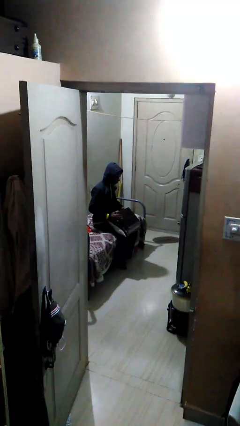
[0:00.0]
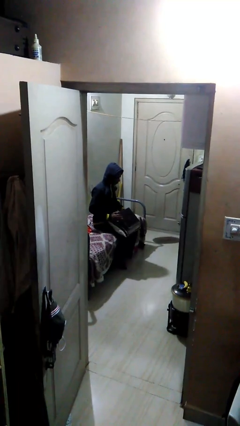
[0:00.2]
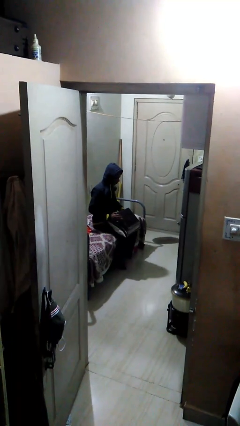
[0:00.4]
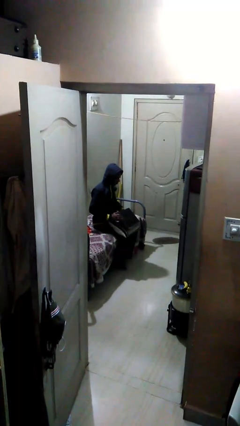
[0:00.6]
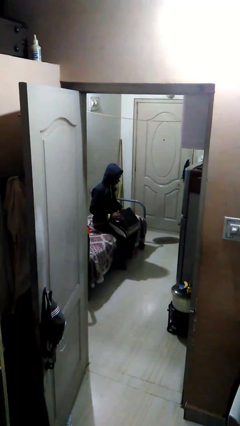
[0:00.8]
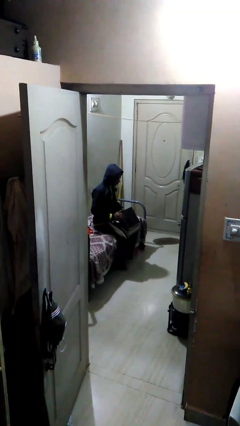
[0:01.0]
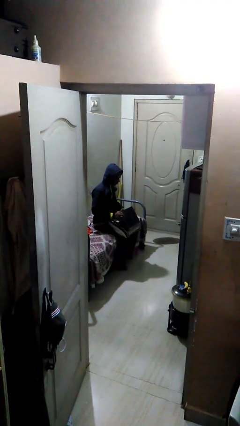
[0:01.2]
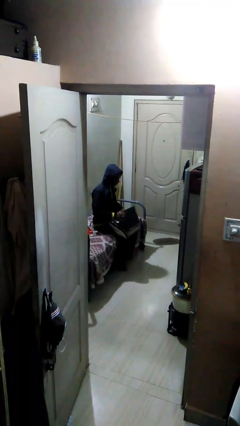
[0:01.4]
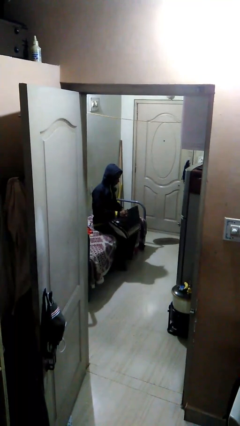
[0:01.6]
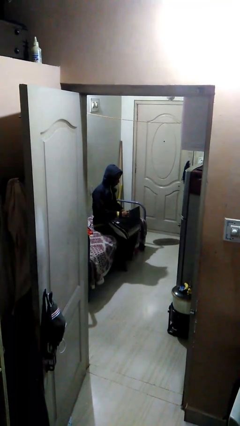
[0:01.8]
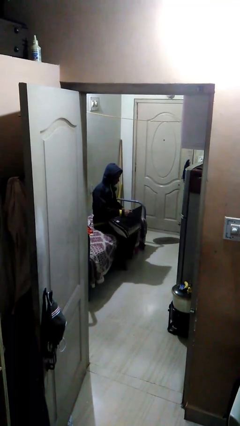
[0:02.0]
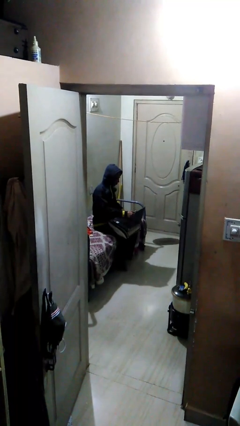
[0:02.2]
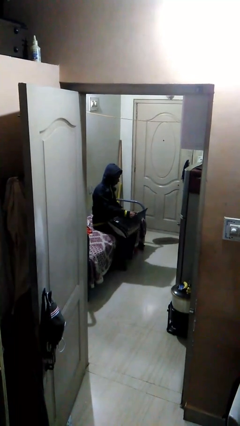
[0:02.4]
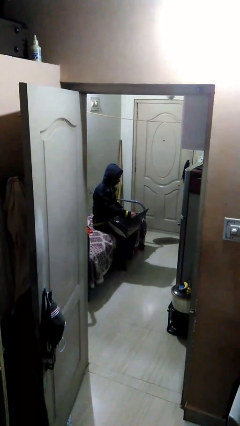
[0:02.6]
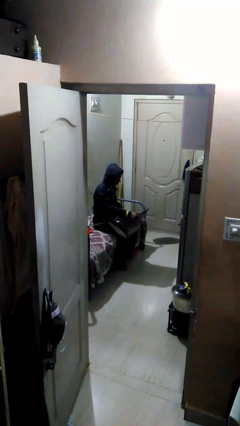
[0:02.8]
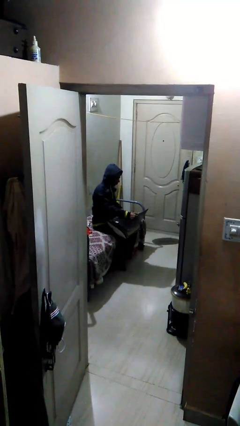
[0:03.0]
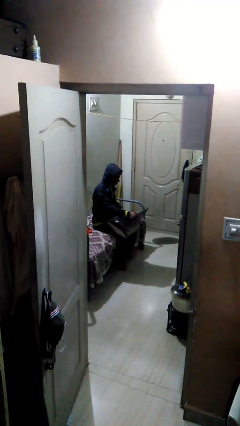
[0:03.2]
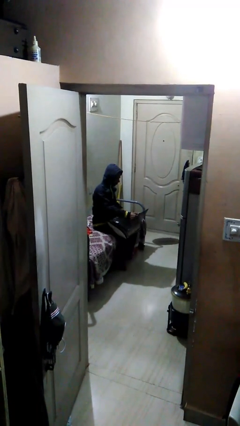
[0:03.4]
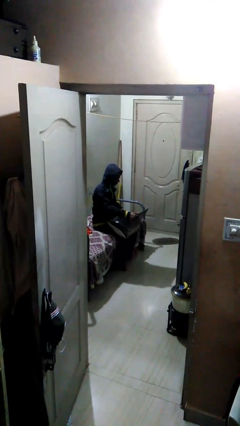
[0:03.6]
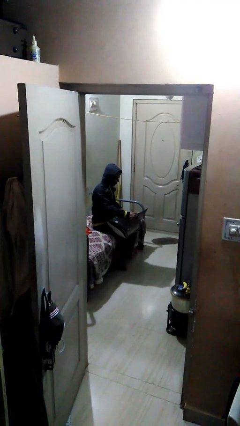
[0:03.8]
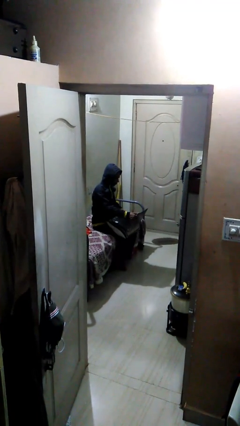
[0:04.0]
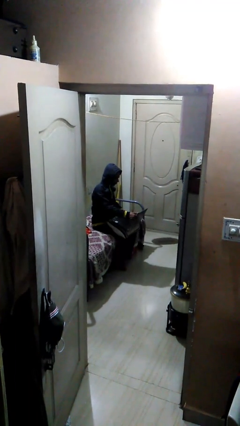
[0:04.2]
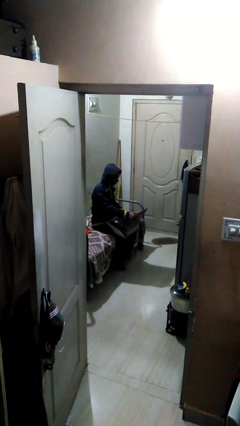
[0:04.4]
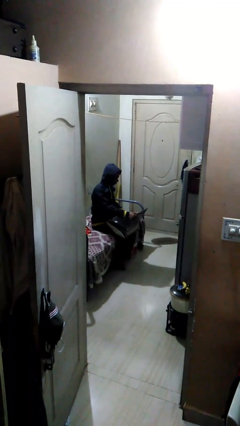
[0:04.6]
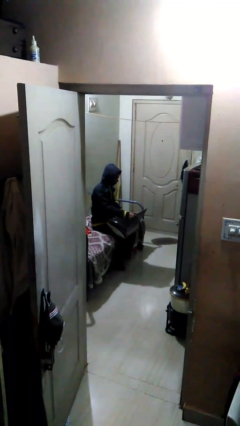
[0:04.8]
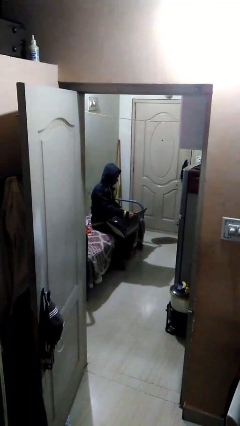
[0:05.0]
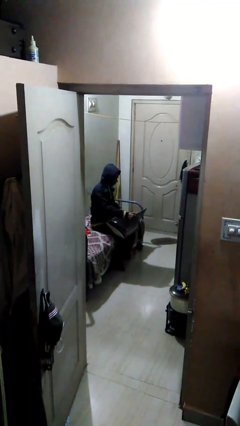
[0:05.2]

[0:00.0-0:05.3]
person interacts with laptop

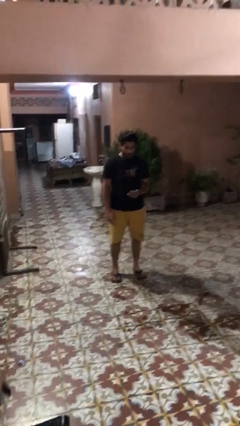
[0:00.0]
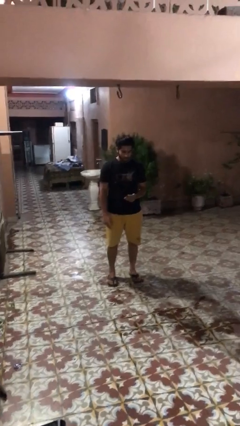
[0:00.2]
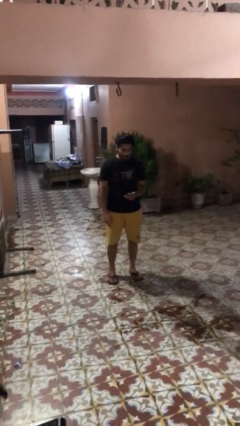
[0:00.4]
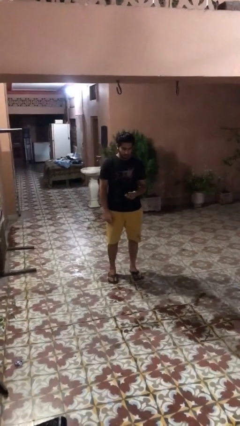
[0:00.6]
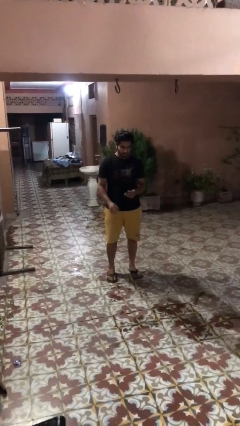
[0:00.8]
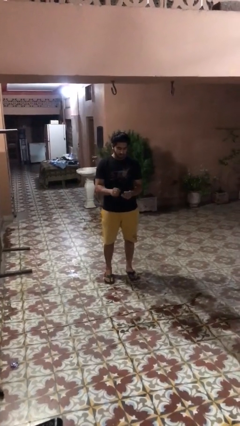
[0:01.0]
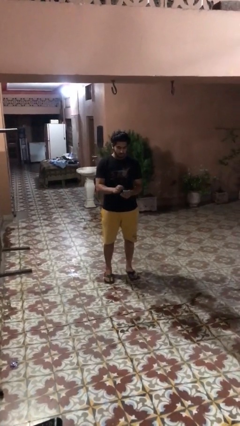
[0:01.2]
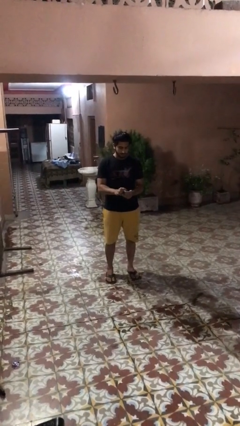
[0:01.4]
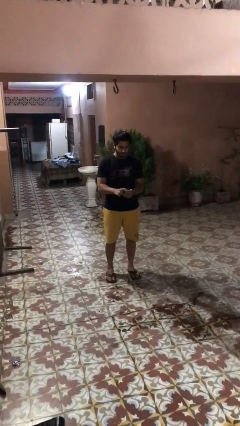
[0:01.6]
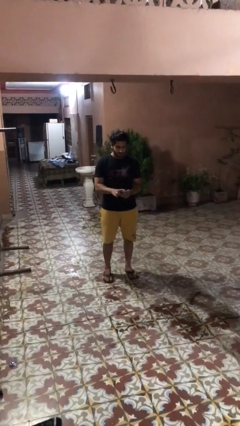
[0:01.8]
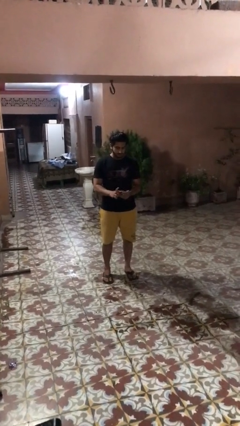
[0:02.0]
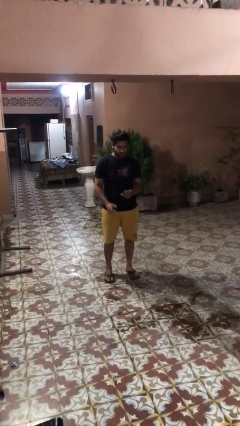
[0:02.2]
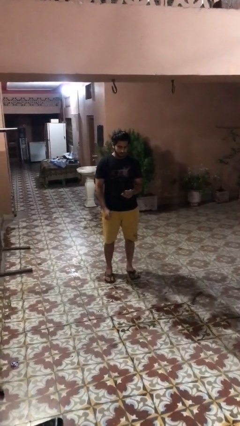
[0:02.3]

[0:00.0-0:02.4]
person gestures zoom in

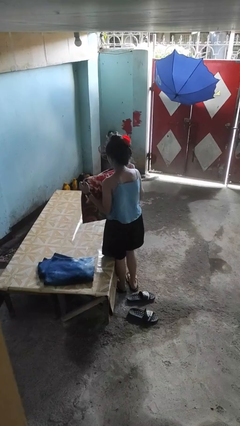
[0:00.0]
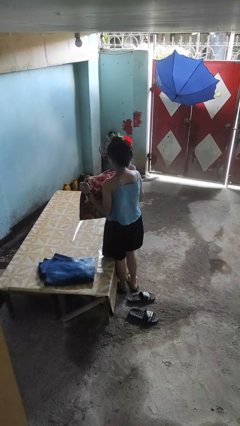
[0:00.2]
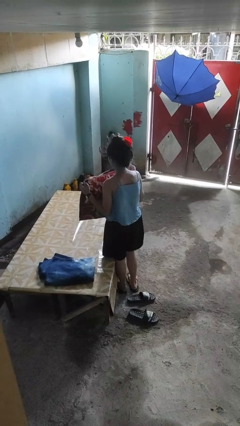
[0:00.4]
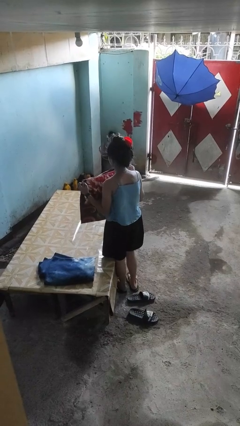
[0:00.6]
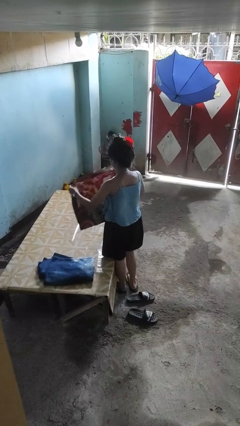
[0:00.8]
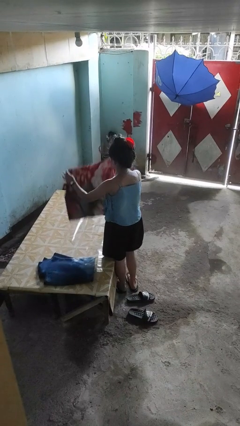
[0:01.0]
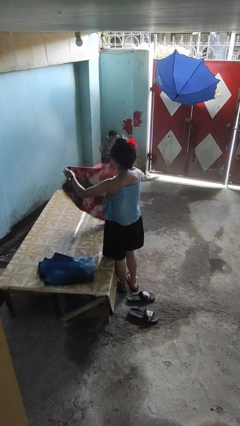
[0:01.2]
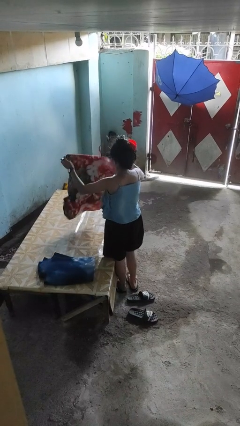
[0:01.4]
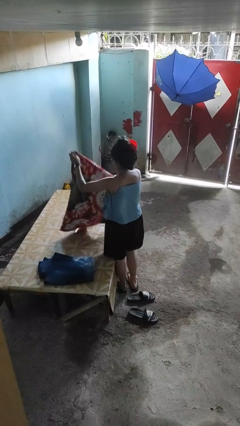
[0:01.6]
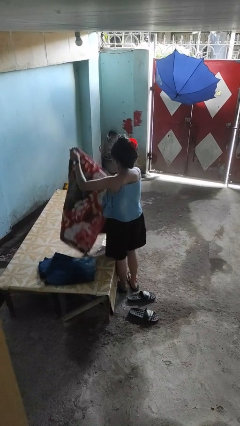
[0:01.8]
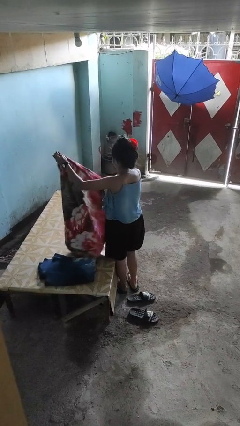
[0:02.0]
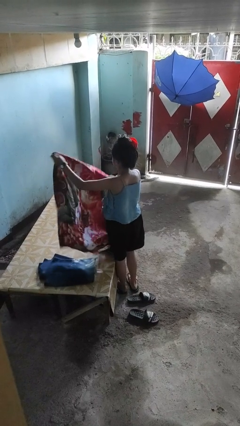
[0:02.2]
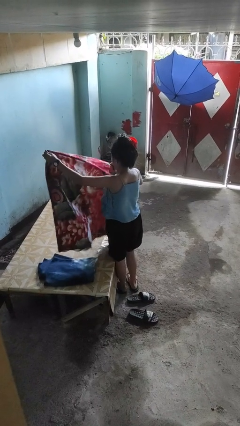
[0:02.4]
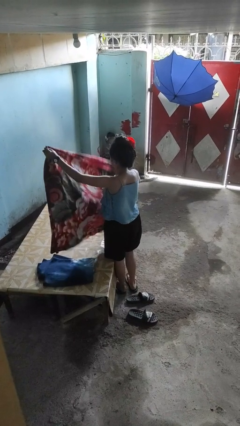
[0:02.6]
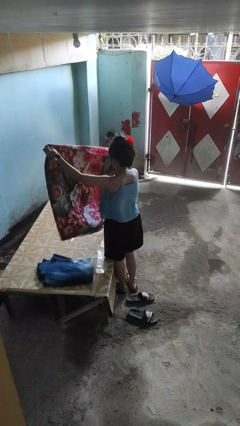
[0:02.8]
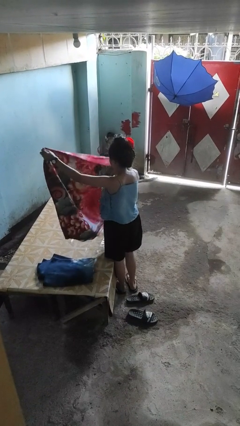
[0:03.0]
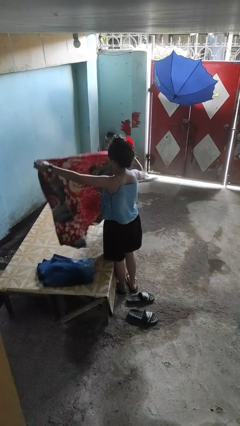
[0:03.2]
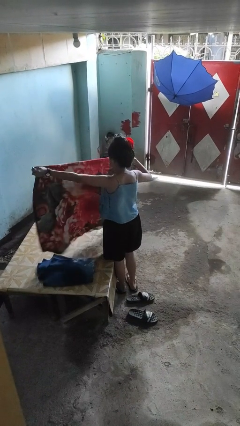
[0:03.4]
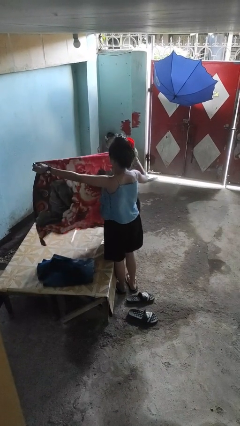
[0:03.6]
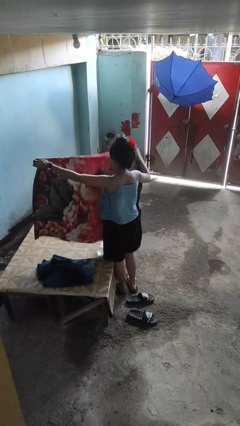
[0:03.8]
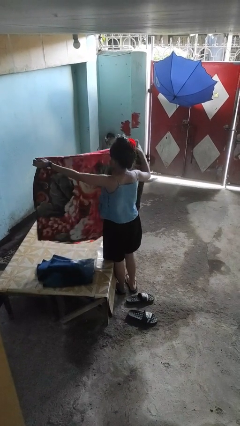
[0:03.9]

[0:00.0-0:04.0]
person unfolds blanket

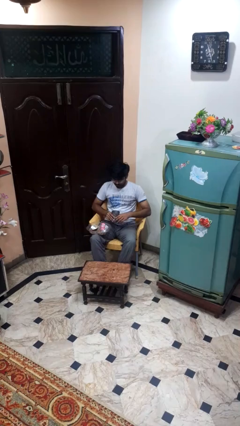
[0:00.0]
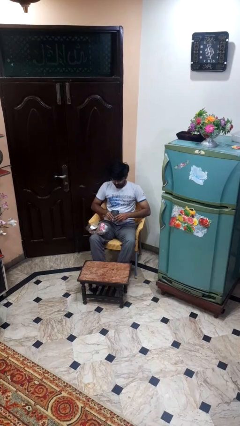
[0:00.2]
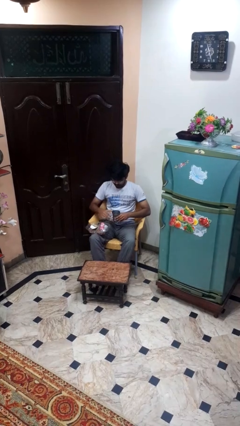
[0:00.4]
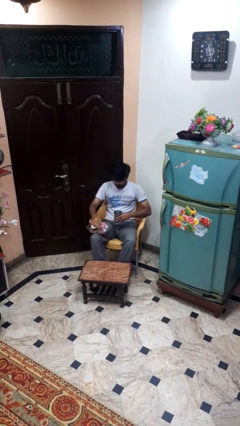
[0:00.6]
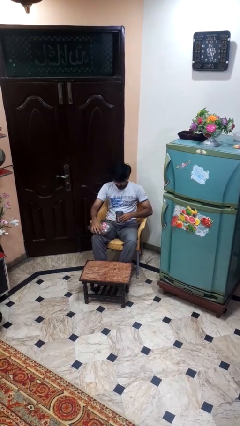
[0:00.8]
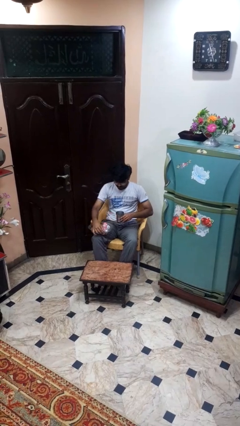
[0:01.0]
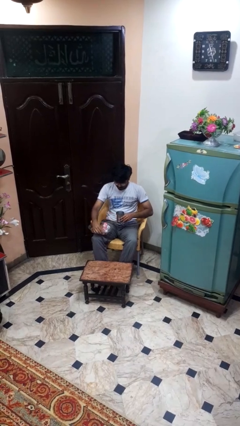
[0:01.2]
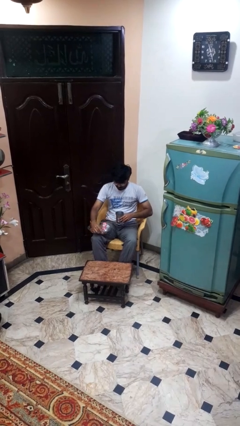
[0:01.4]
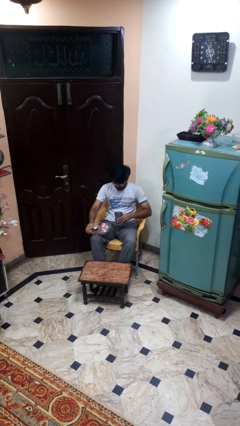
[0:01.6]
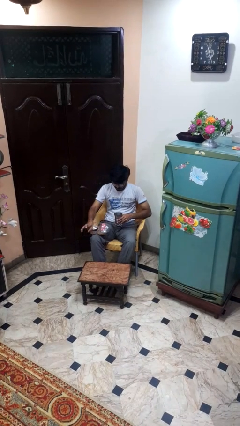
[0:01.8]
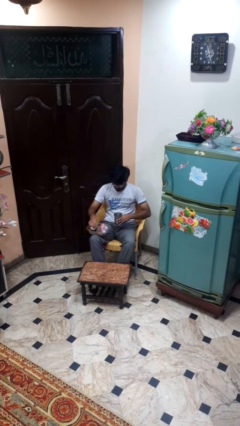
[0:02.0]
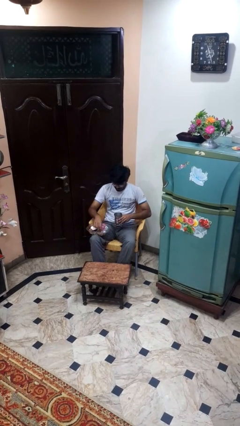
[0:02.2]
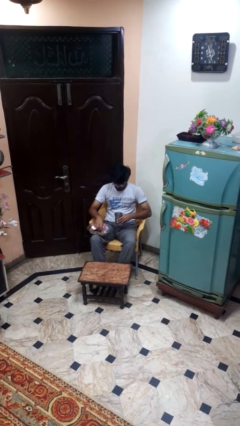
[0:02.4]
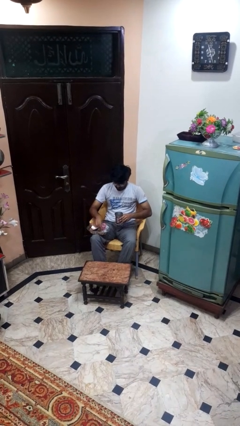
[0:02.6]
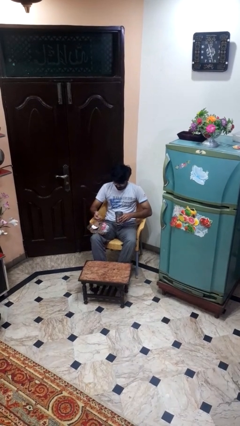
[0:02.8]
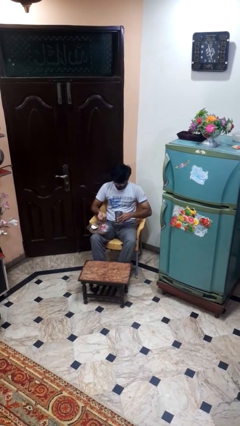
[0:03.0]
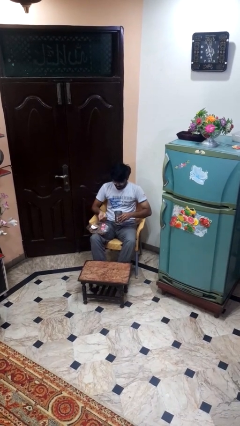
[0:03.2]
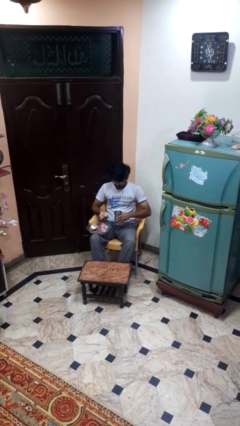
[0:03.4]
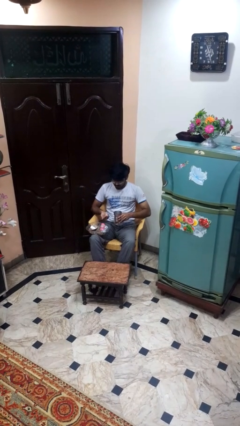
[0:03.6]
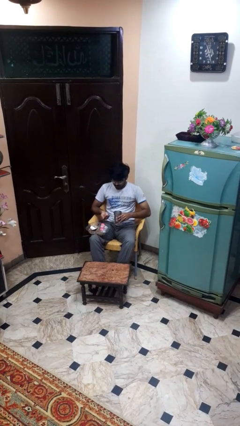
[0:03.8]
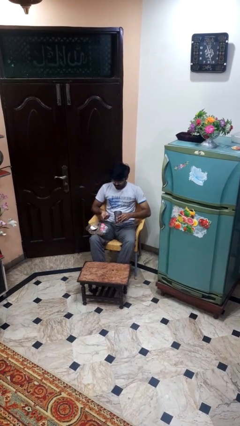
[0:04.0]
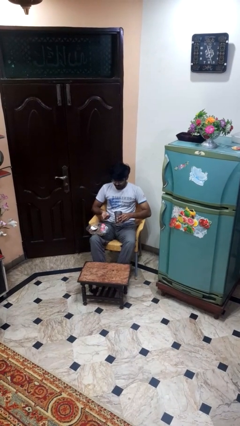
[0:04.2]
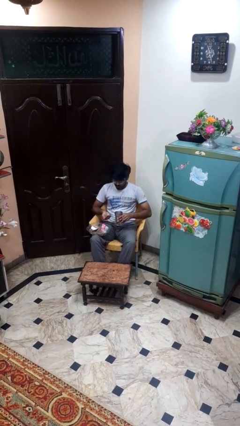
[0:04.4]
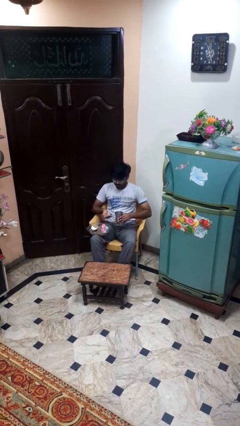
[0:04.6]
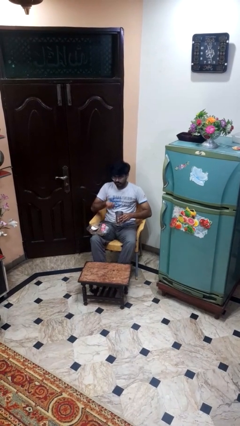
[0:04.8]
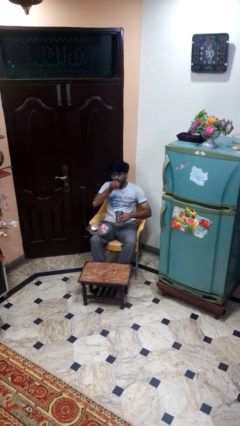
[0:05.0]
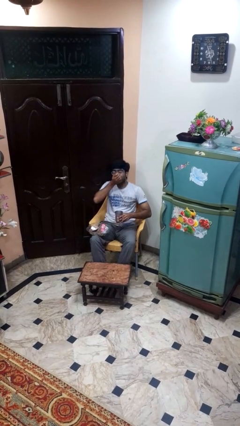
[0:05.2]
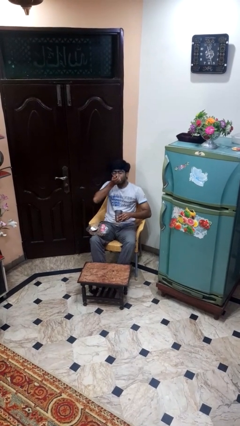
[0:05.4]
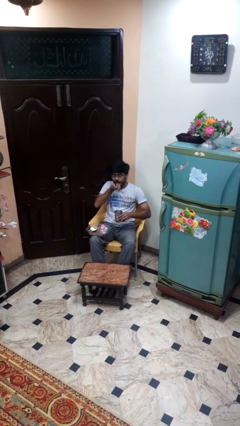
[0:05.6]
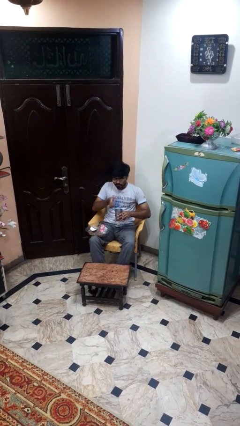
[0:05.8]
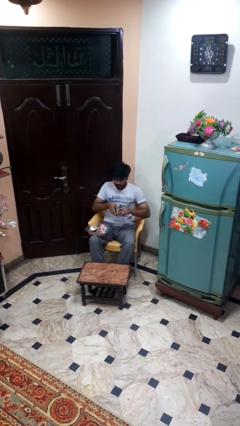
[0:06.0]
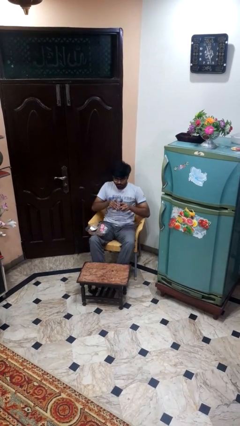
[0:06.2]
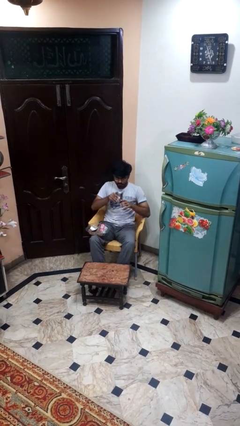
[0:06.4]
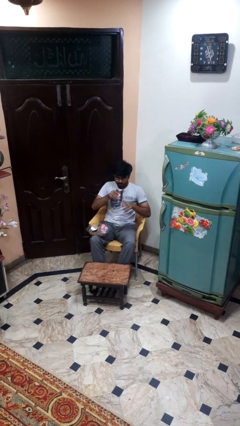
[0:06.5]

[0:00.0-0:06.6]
person takes medicine pills

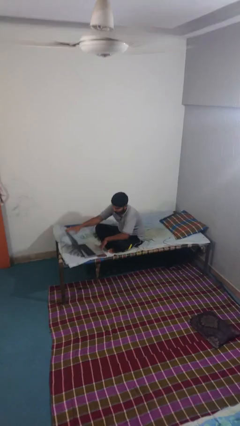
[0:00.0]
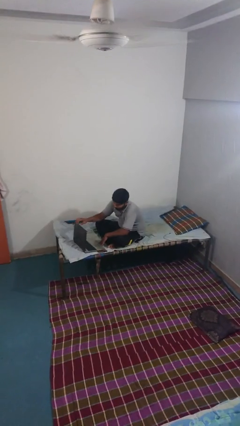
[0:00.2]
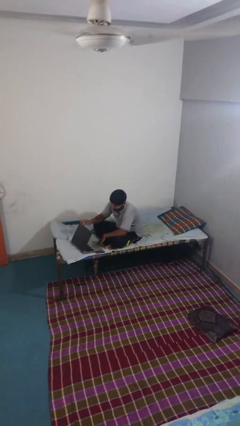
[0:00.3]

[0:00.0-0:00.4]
person opens laptop
